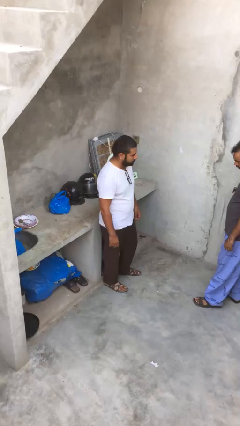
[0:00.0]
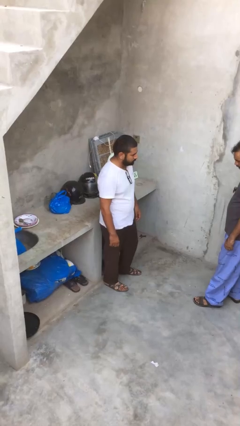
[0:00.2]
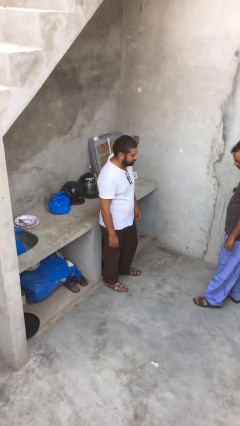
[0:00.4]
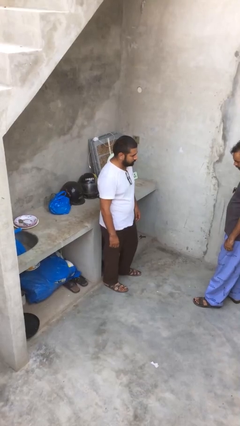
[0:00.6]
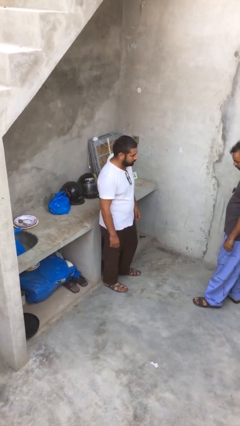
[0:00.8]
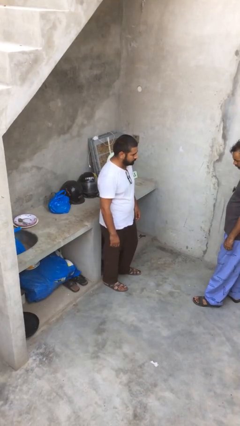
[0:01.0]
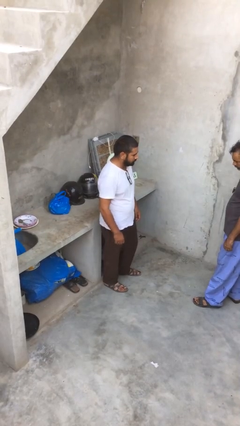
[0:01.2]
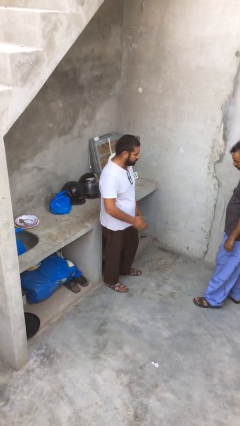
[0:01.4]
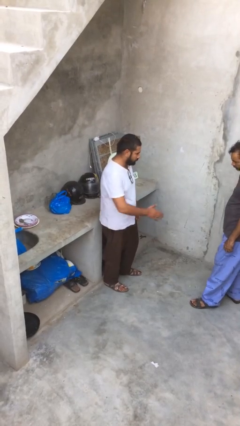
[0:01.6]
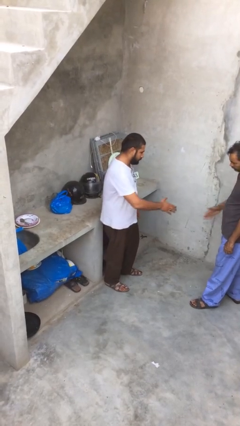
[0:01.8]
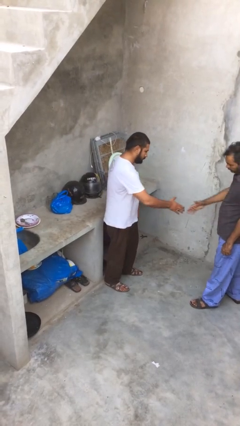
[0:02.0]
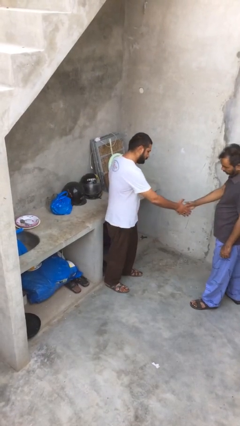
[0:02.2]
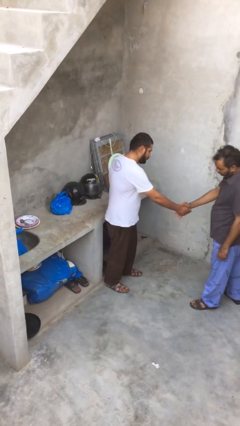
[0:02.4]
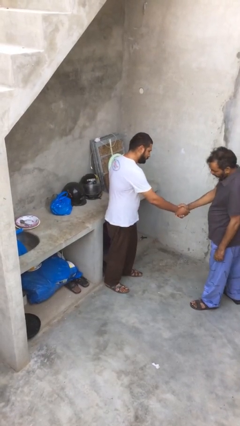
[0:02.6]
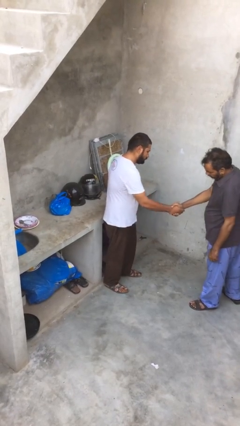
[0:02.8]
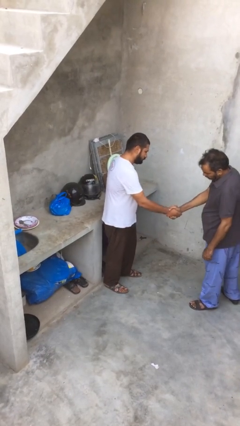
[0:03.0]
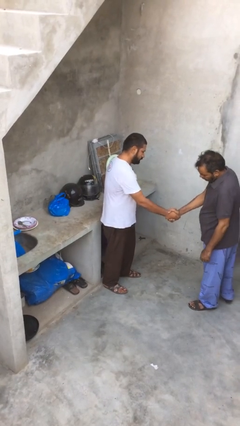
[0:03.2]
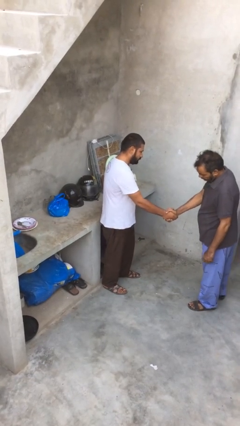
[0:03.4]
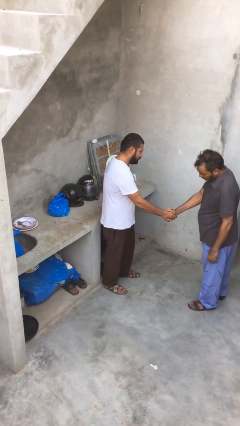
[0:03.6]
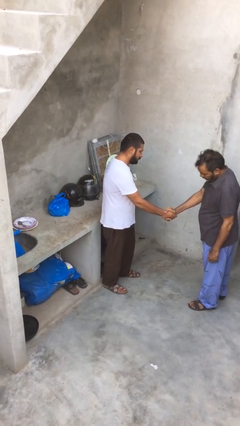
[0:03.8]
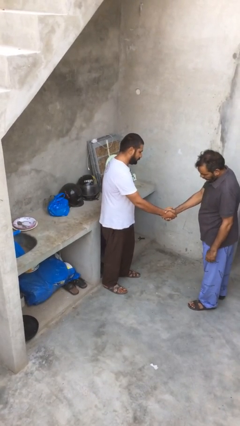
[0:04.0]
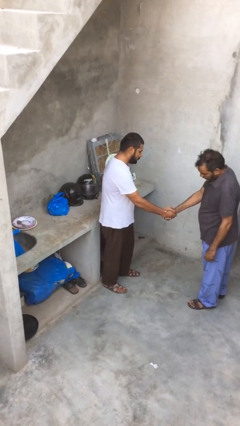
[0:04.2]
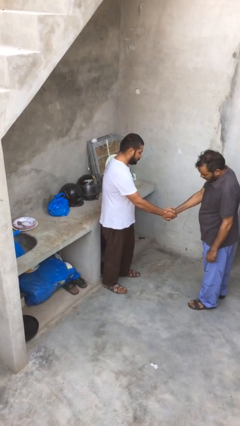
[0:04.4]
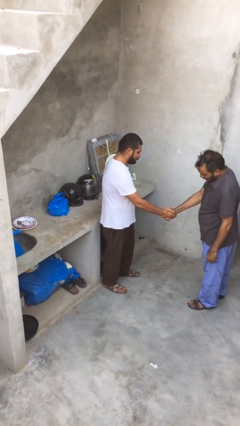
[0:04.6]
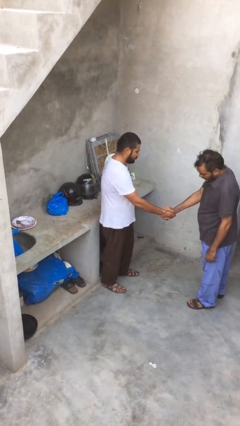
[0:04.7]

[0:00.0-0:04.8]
person shakes hand

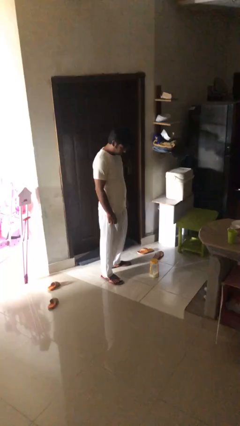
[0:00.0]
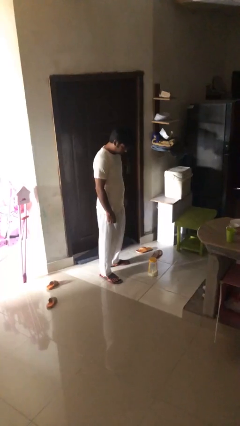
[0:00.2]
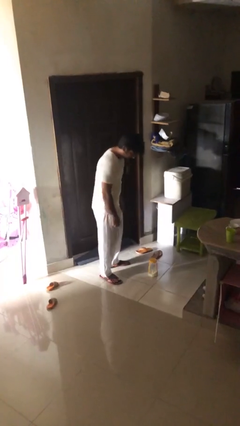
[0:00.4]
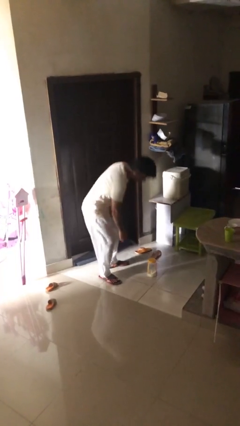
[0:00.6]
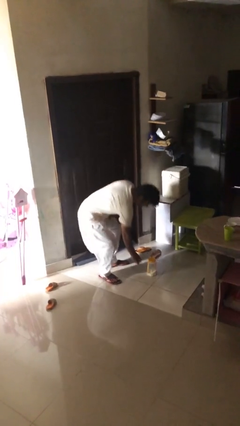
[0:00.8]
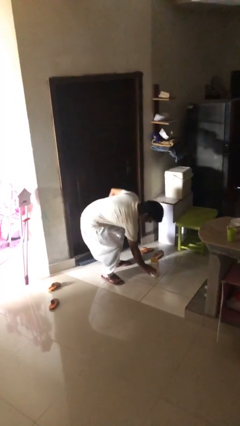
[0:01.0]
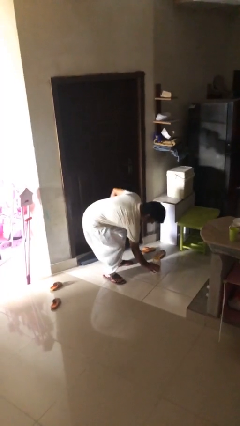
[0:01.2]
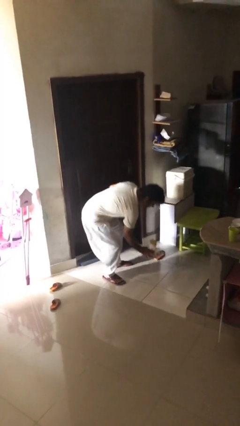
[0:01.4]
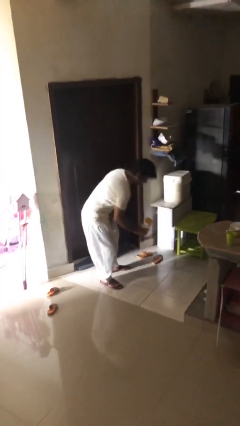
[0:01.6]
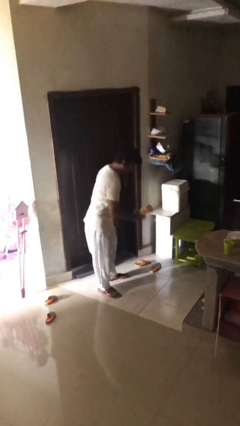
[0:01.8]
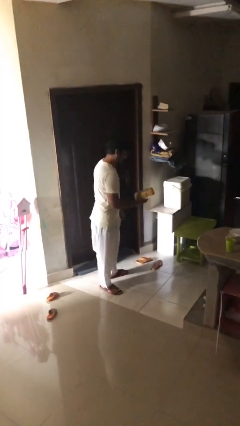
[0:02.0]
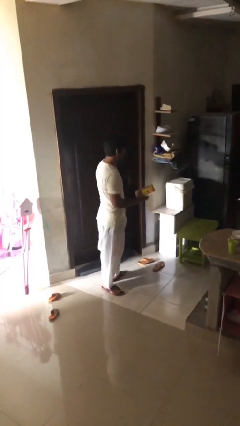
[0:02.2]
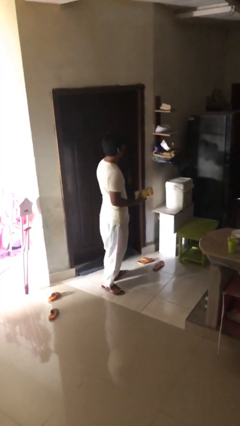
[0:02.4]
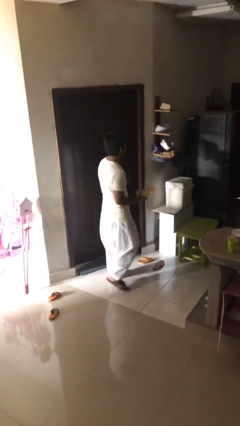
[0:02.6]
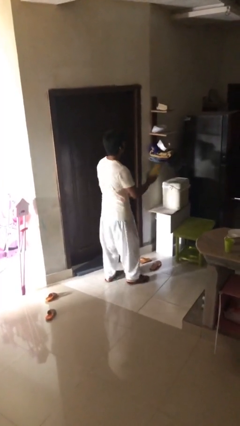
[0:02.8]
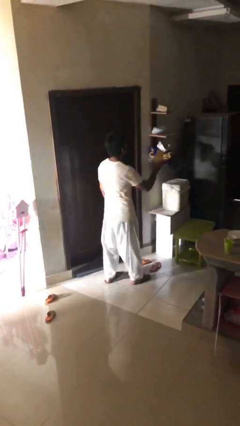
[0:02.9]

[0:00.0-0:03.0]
person picks up object from floor

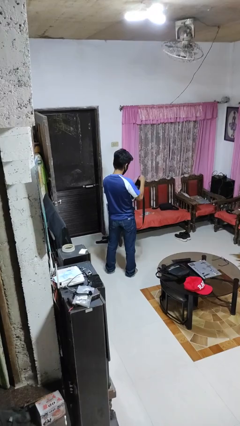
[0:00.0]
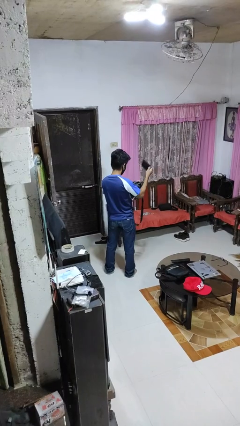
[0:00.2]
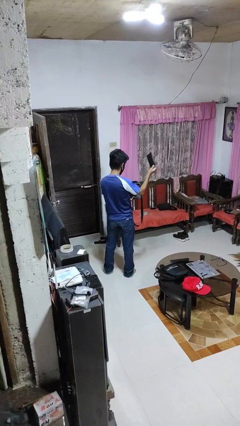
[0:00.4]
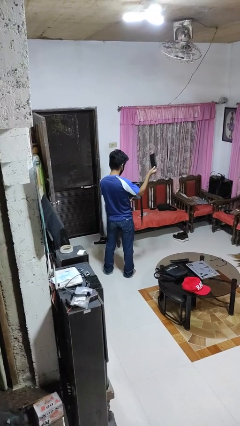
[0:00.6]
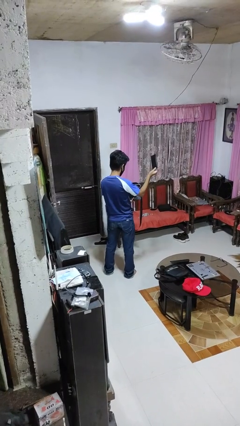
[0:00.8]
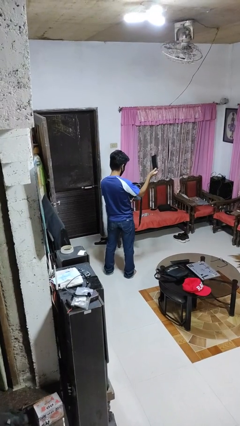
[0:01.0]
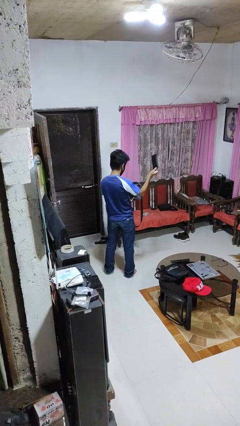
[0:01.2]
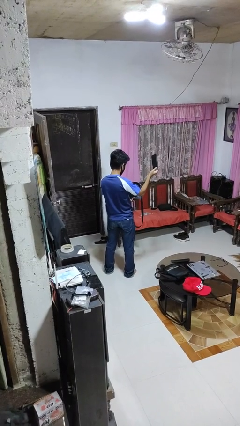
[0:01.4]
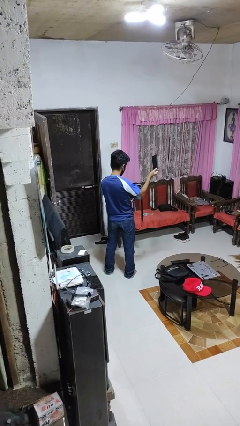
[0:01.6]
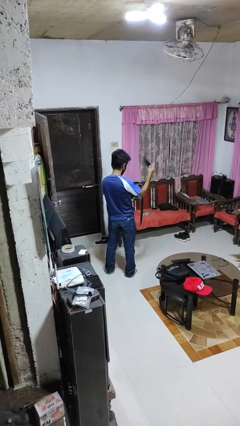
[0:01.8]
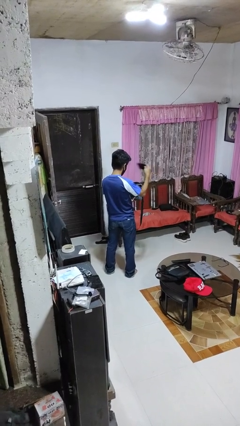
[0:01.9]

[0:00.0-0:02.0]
person takes object from purse

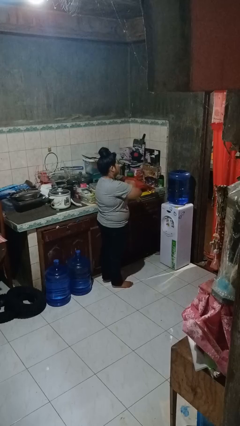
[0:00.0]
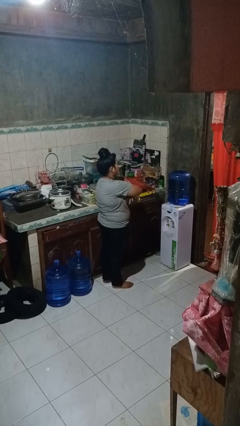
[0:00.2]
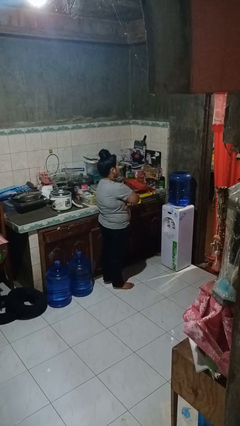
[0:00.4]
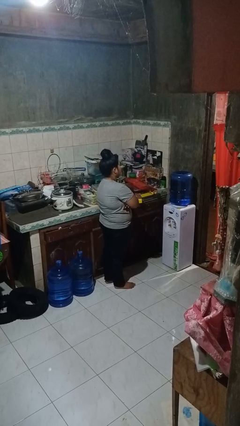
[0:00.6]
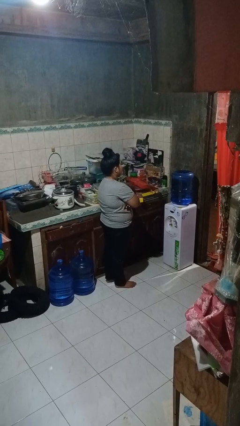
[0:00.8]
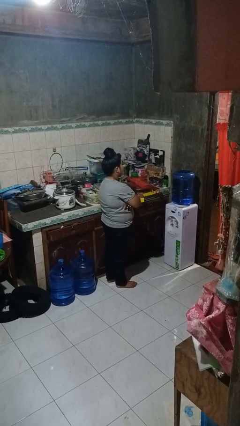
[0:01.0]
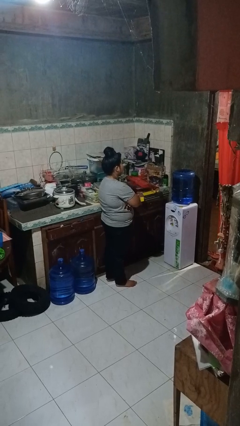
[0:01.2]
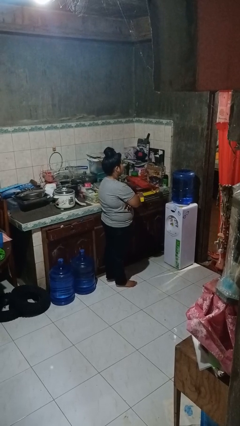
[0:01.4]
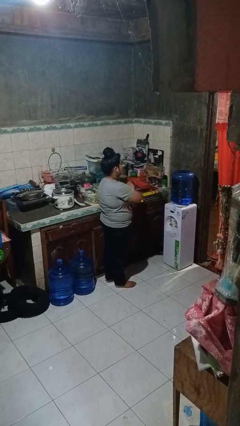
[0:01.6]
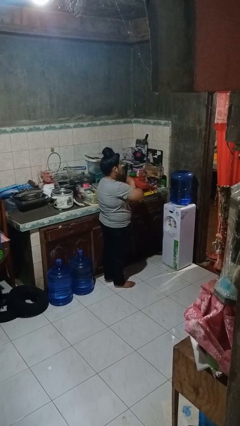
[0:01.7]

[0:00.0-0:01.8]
person crosses arms

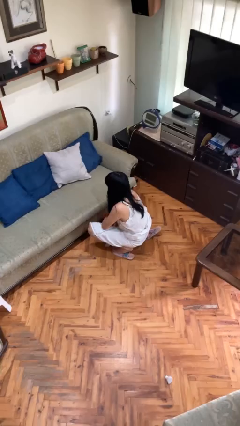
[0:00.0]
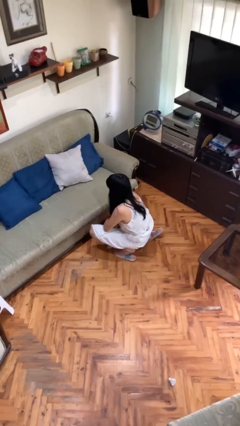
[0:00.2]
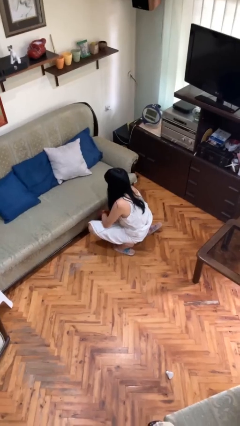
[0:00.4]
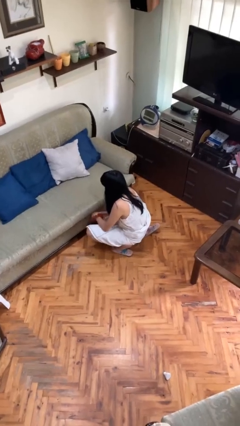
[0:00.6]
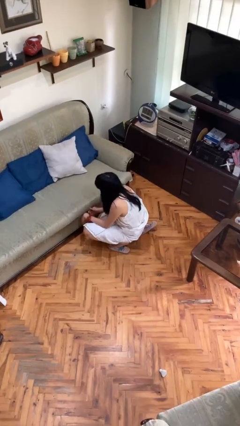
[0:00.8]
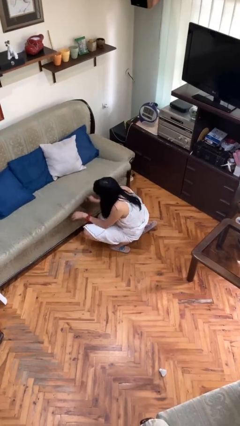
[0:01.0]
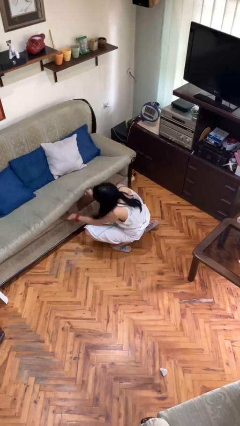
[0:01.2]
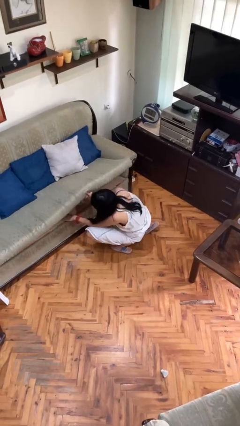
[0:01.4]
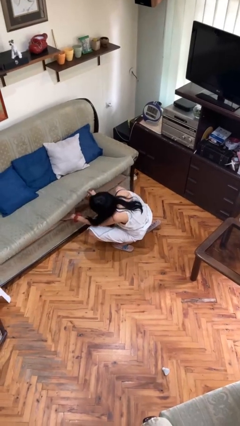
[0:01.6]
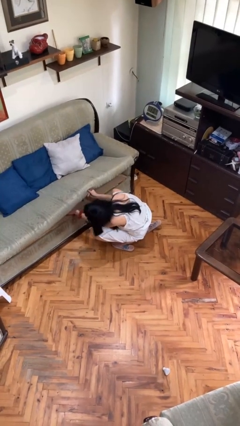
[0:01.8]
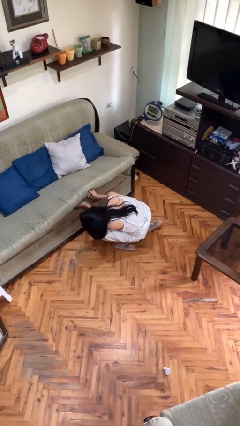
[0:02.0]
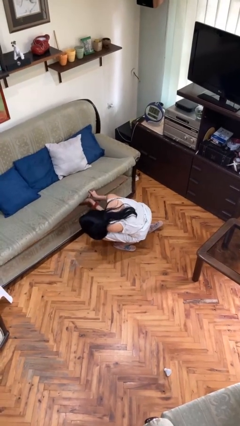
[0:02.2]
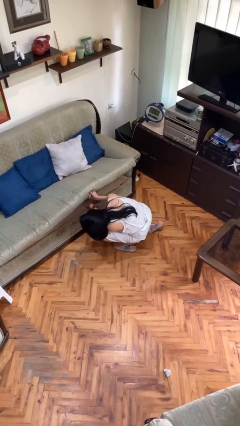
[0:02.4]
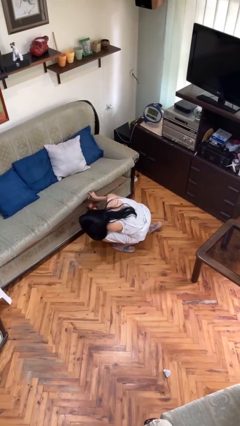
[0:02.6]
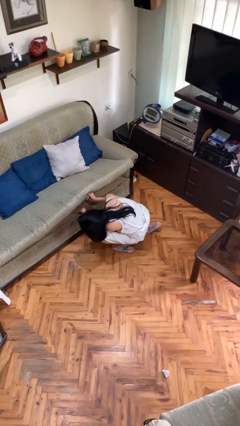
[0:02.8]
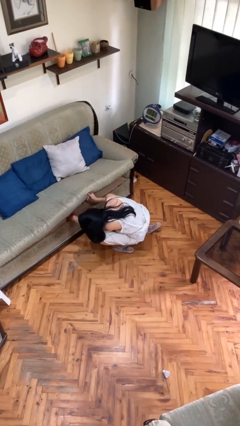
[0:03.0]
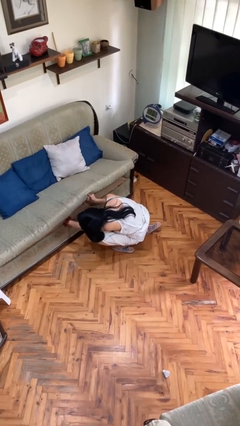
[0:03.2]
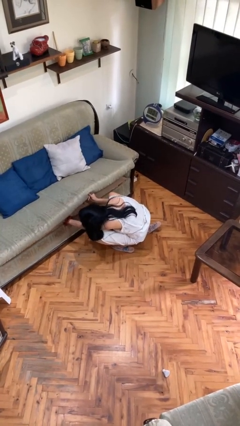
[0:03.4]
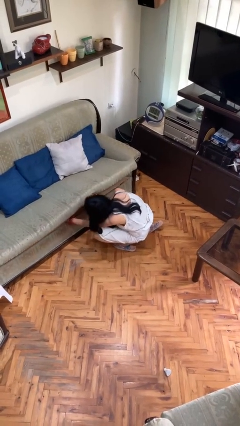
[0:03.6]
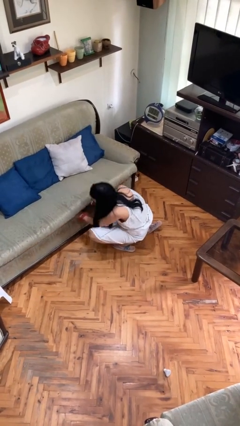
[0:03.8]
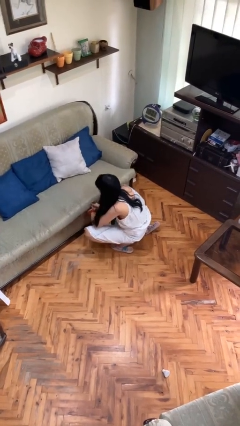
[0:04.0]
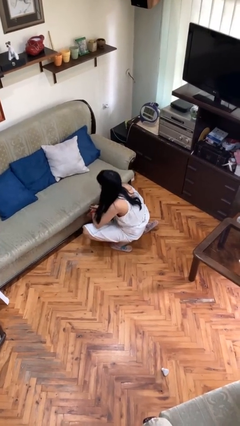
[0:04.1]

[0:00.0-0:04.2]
person searches under couch

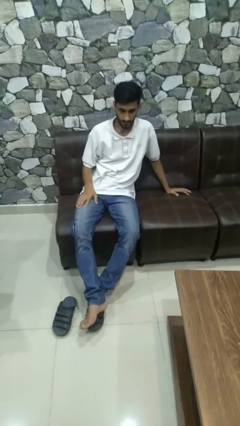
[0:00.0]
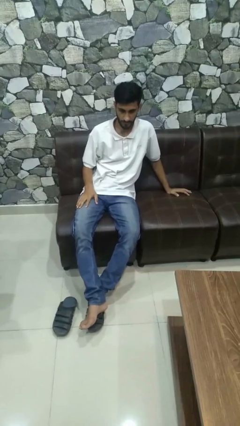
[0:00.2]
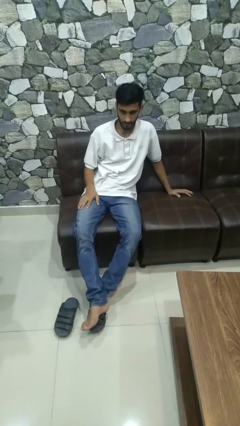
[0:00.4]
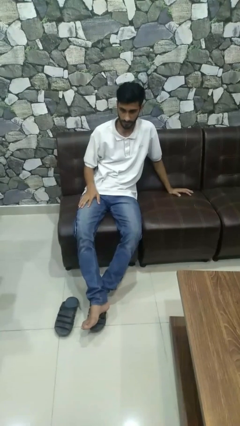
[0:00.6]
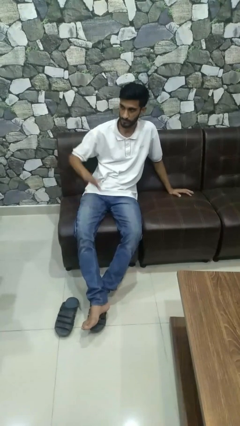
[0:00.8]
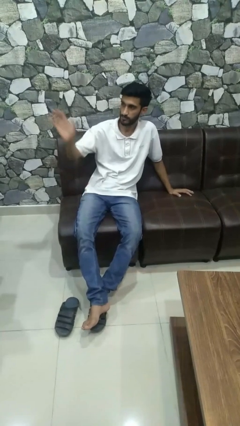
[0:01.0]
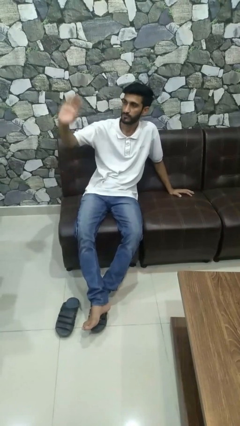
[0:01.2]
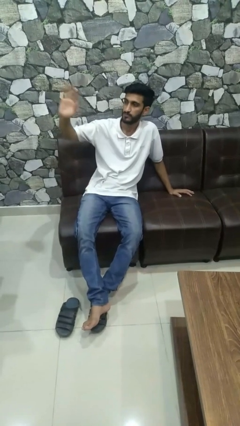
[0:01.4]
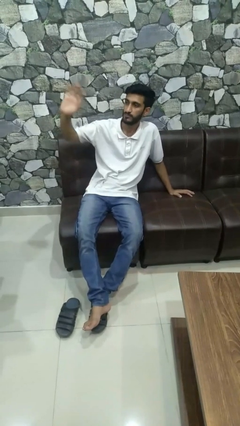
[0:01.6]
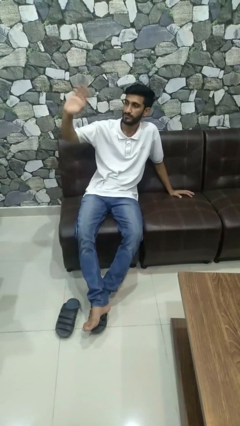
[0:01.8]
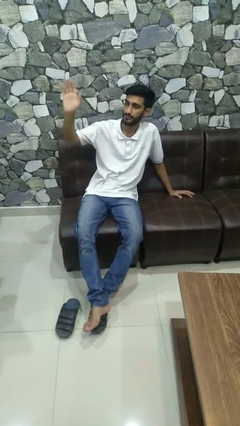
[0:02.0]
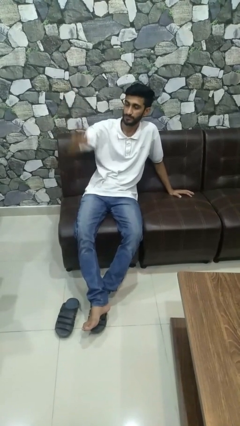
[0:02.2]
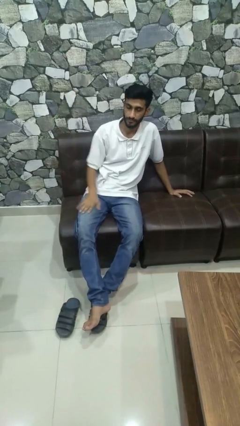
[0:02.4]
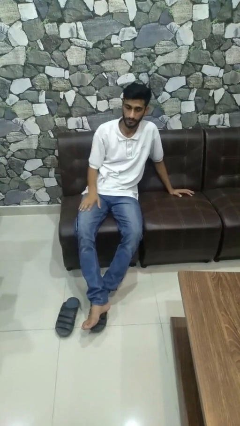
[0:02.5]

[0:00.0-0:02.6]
person waves at person
